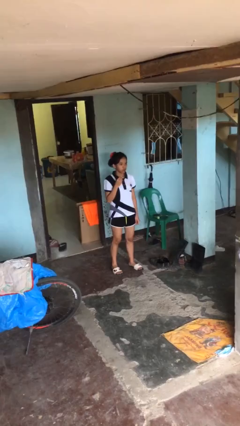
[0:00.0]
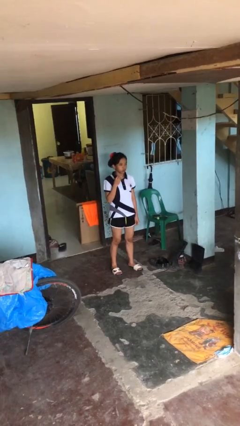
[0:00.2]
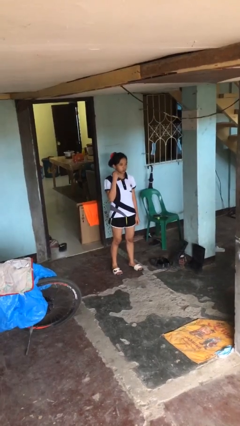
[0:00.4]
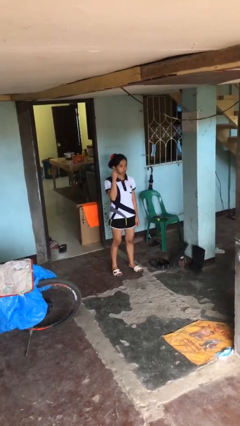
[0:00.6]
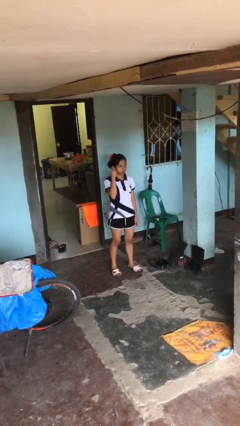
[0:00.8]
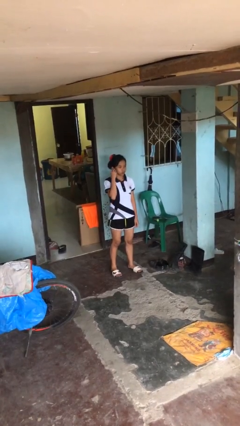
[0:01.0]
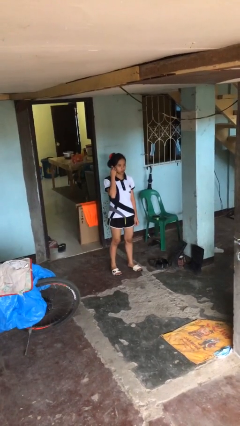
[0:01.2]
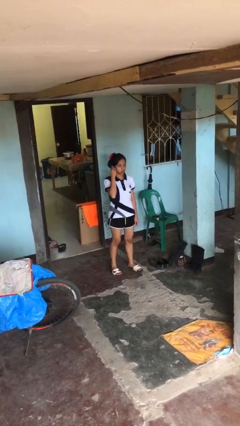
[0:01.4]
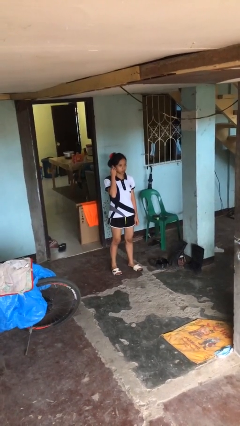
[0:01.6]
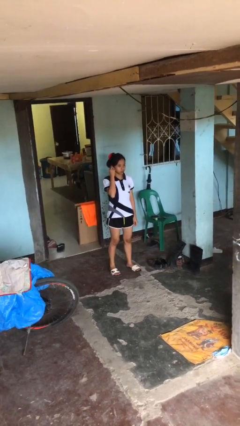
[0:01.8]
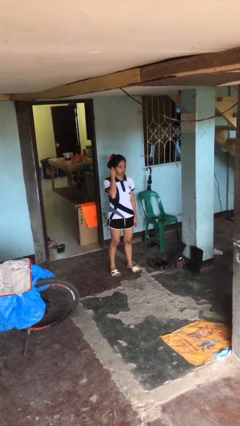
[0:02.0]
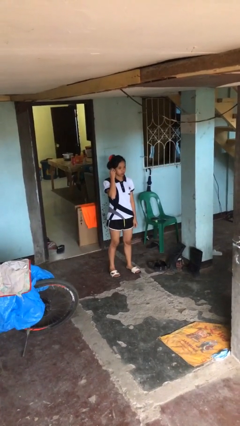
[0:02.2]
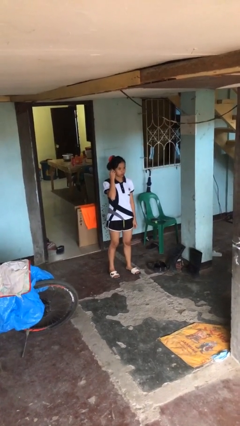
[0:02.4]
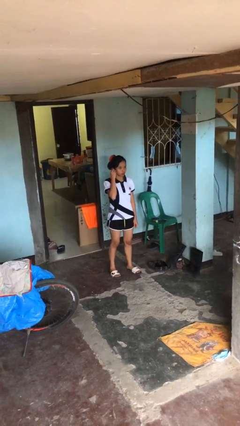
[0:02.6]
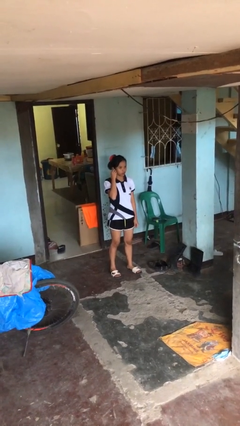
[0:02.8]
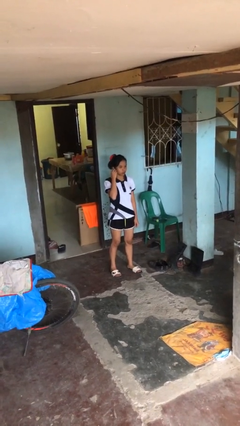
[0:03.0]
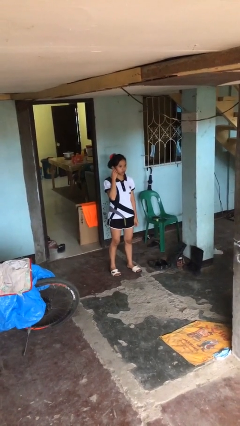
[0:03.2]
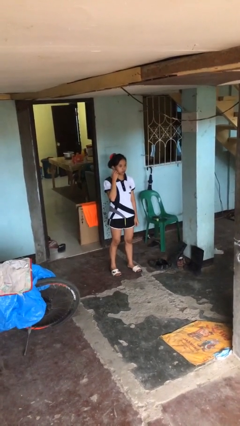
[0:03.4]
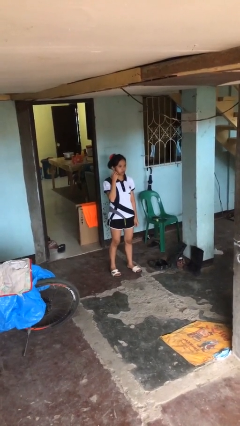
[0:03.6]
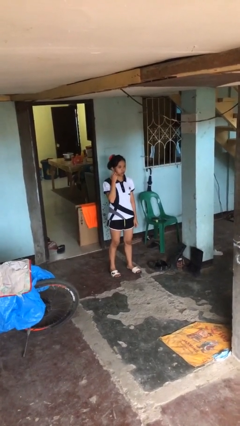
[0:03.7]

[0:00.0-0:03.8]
person puts on earrings

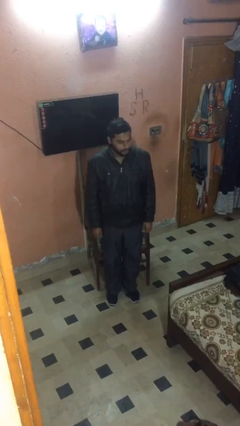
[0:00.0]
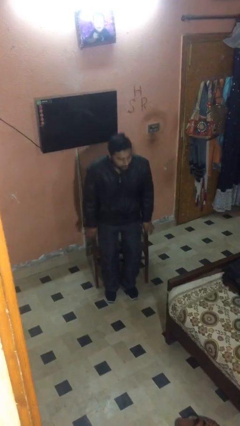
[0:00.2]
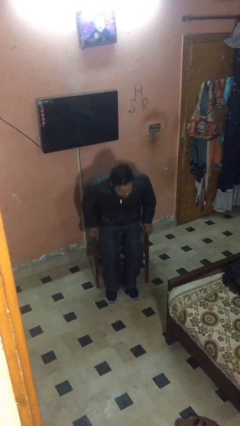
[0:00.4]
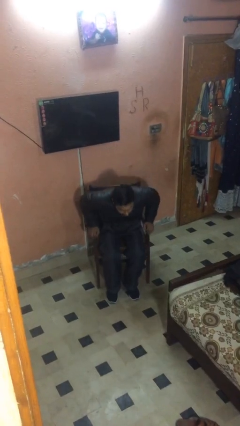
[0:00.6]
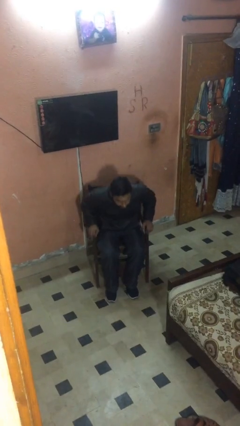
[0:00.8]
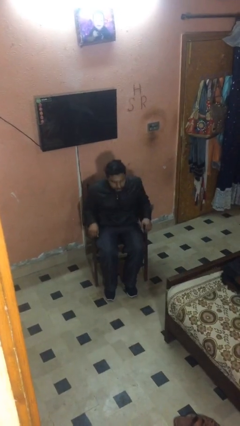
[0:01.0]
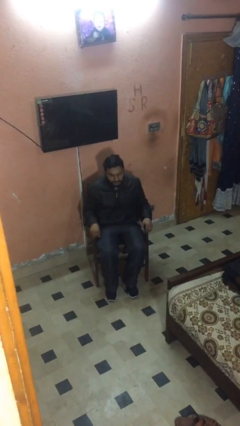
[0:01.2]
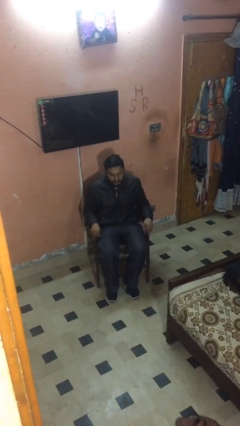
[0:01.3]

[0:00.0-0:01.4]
person sits down

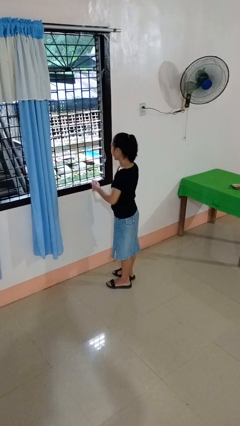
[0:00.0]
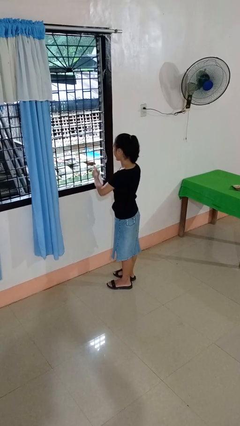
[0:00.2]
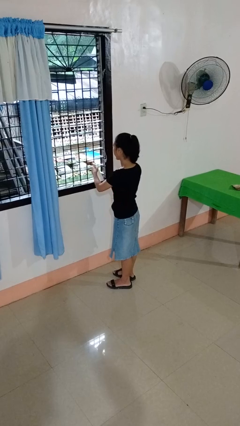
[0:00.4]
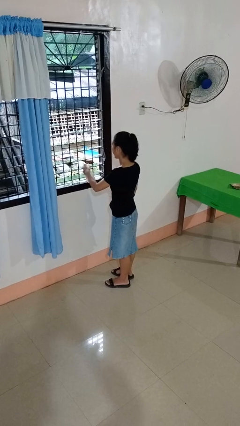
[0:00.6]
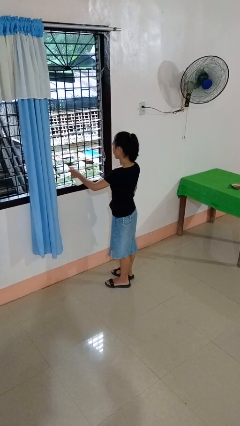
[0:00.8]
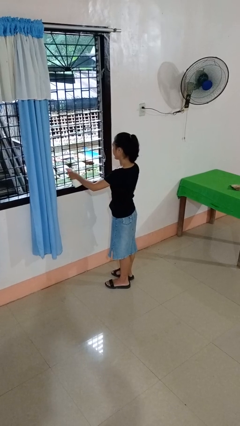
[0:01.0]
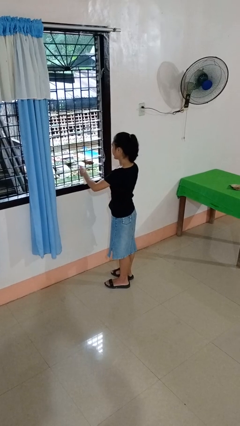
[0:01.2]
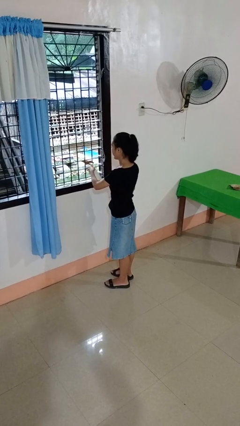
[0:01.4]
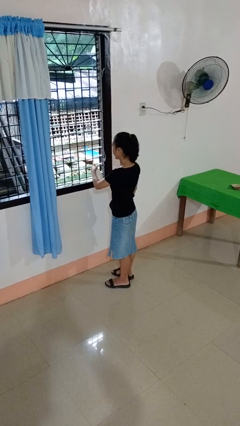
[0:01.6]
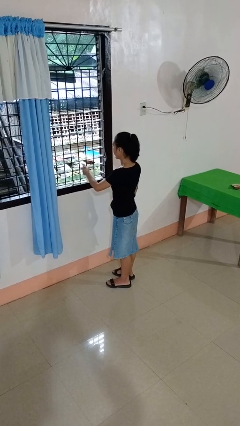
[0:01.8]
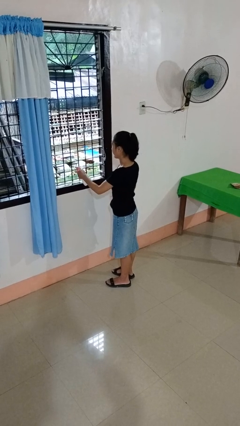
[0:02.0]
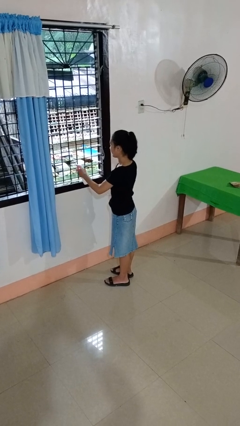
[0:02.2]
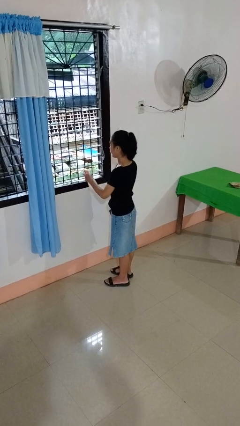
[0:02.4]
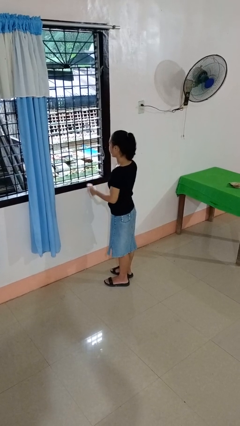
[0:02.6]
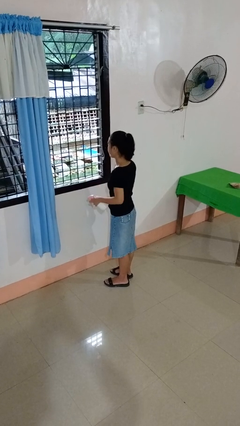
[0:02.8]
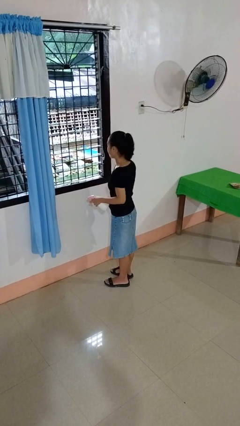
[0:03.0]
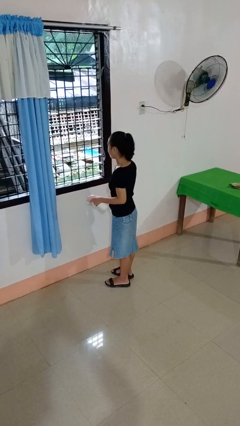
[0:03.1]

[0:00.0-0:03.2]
person sprays from bottle

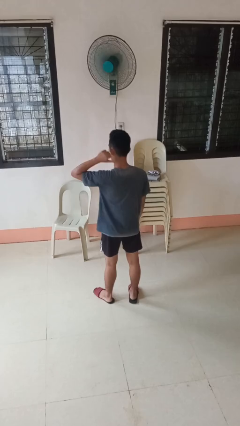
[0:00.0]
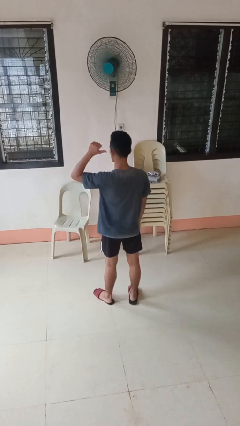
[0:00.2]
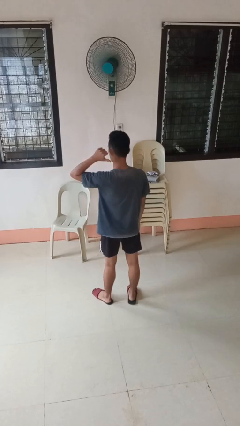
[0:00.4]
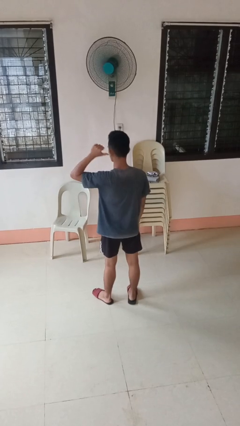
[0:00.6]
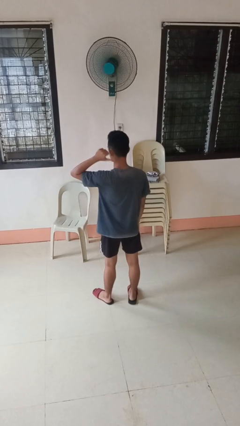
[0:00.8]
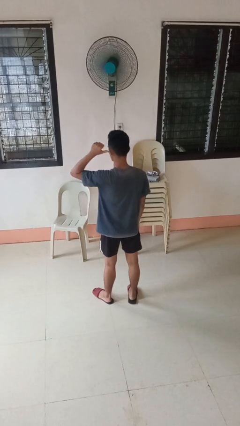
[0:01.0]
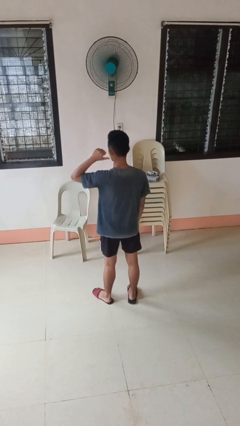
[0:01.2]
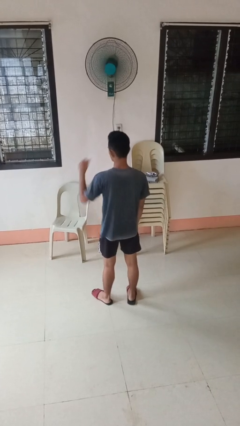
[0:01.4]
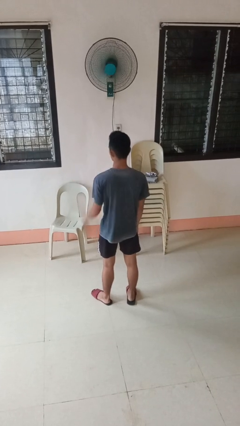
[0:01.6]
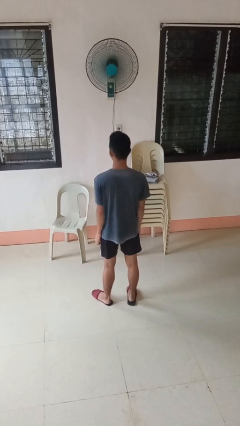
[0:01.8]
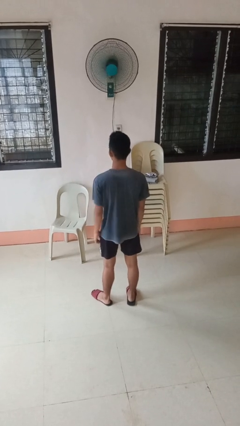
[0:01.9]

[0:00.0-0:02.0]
person gestures behind me

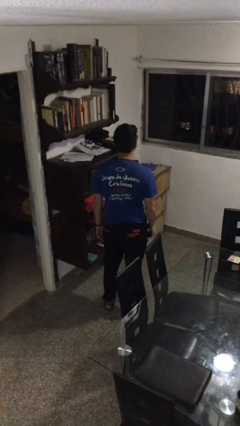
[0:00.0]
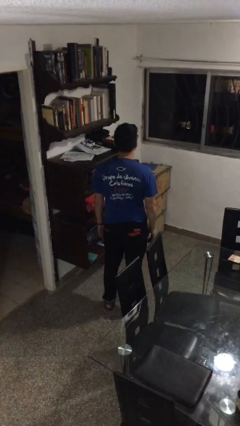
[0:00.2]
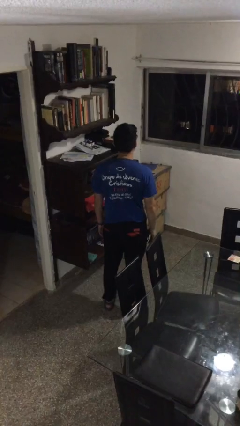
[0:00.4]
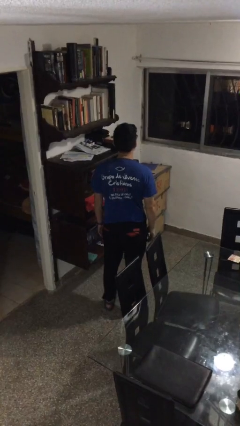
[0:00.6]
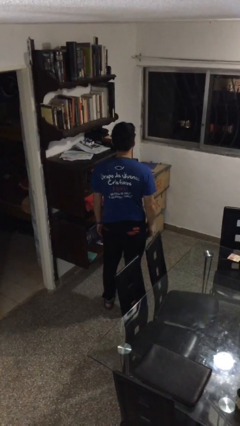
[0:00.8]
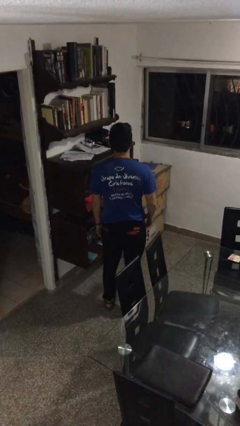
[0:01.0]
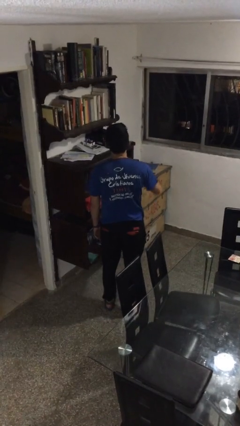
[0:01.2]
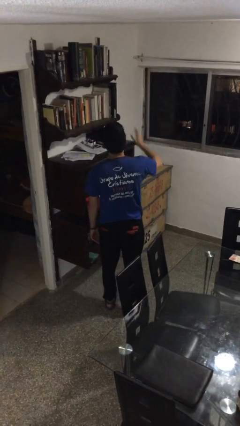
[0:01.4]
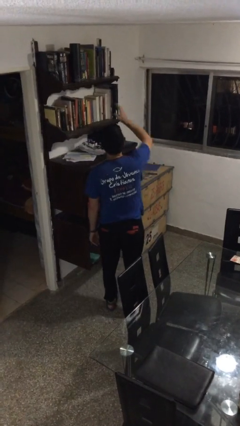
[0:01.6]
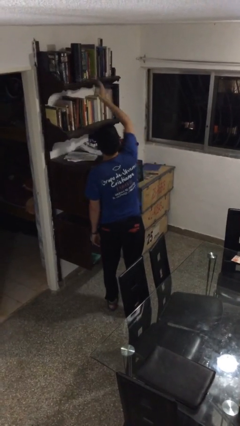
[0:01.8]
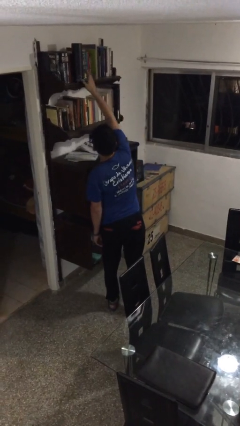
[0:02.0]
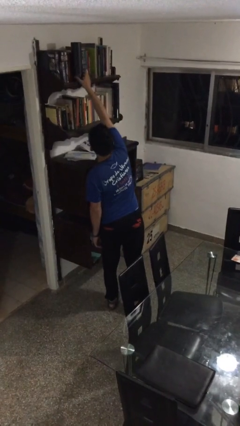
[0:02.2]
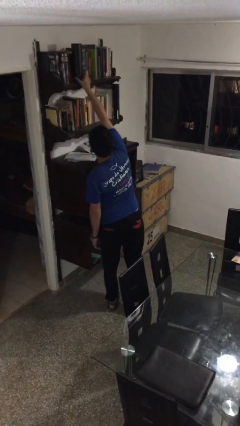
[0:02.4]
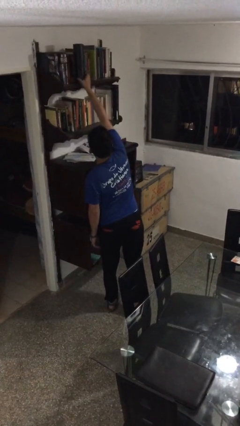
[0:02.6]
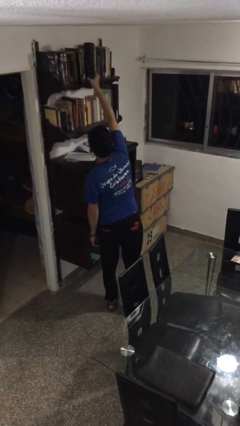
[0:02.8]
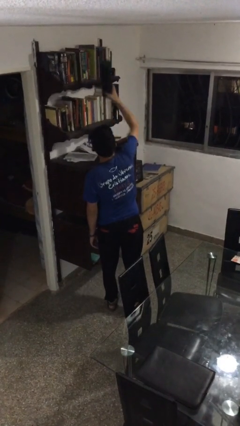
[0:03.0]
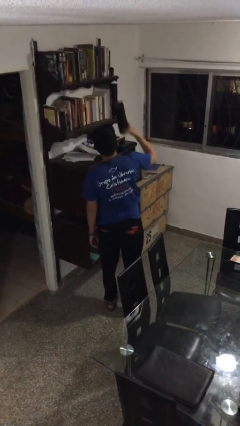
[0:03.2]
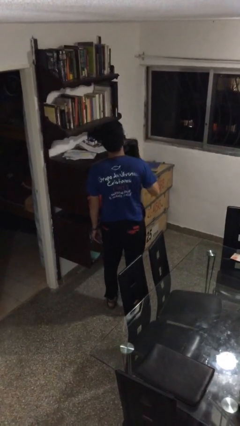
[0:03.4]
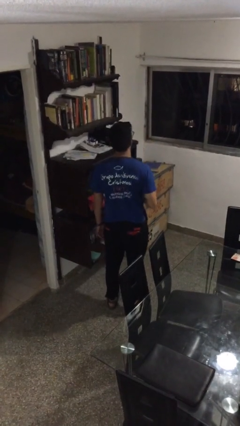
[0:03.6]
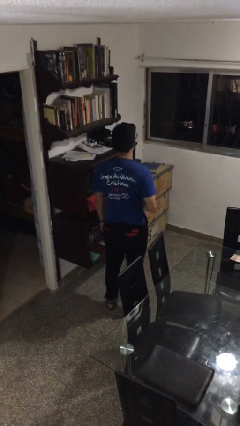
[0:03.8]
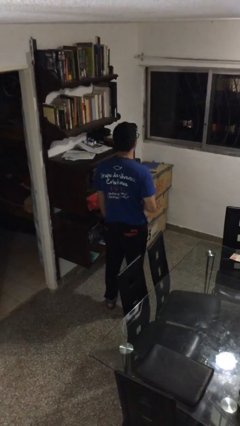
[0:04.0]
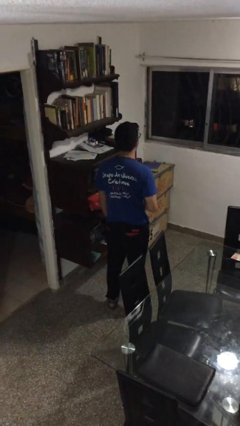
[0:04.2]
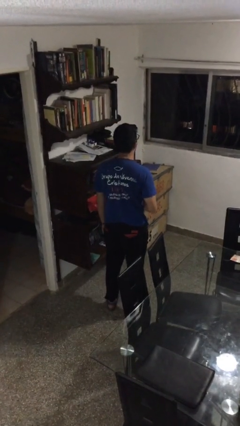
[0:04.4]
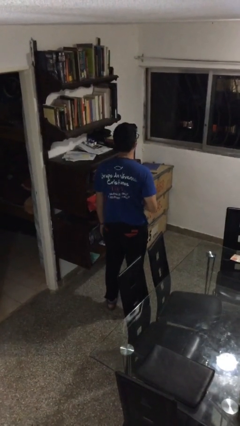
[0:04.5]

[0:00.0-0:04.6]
person picks up object from shelf

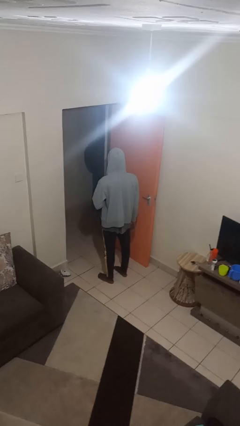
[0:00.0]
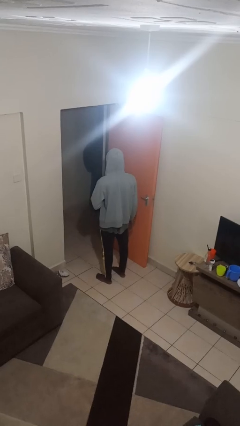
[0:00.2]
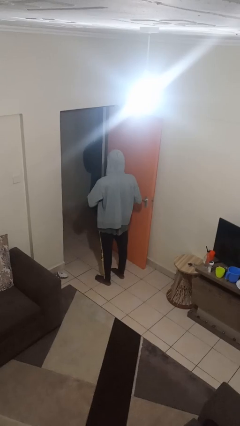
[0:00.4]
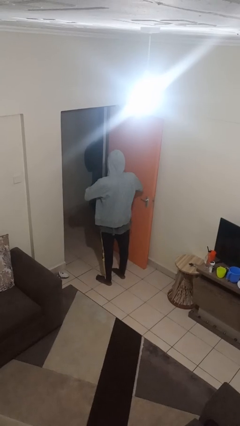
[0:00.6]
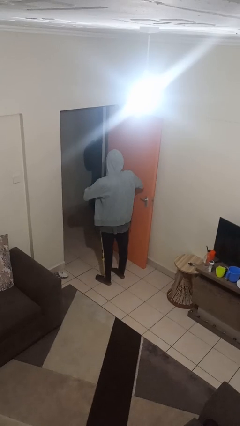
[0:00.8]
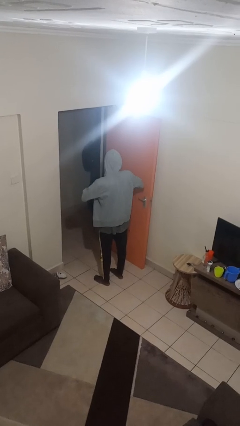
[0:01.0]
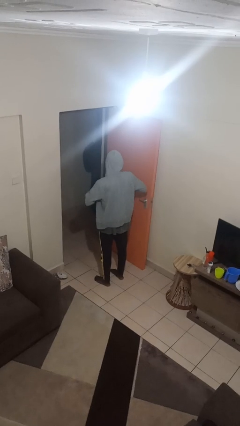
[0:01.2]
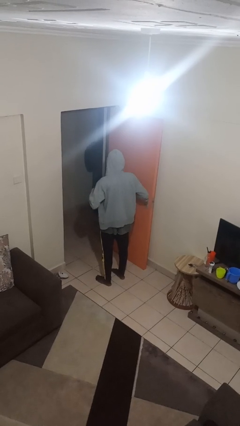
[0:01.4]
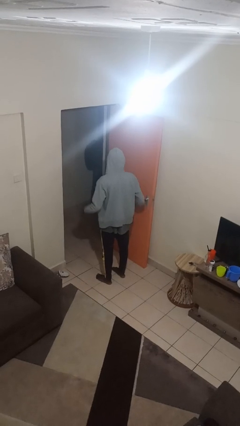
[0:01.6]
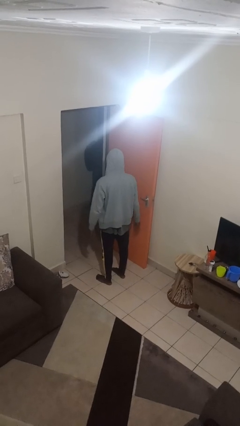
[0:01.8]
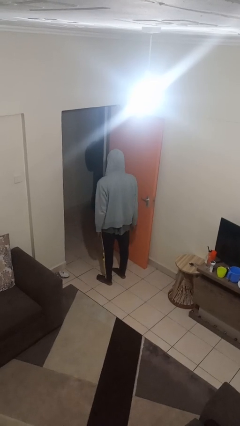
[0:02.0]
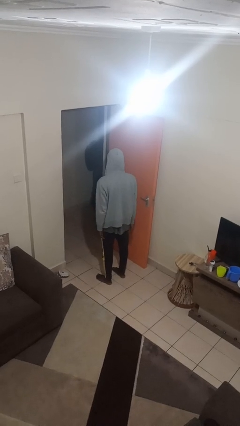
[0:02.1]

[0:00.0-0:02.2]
person takes off ring

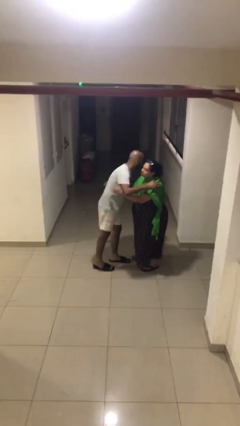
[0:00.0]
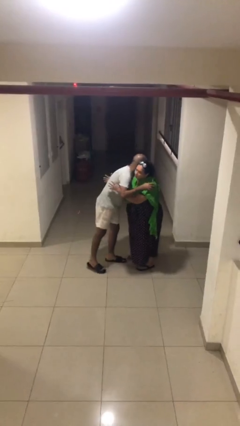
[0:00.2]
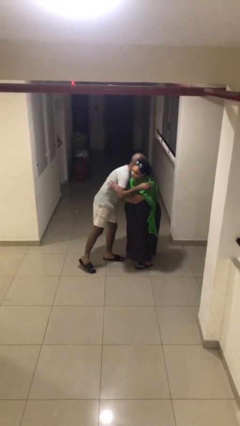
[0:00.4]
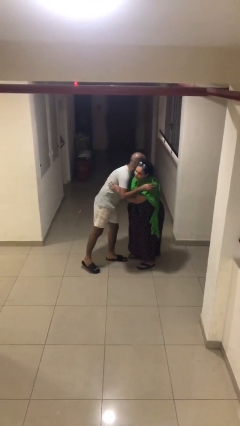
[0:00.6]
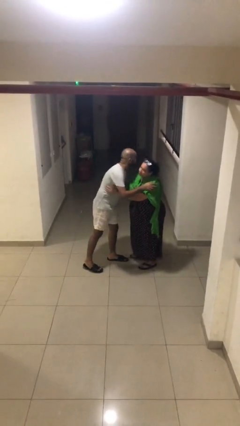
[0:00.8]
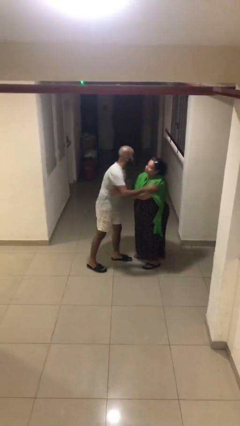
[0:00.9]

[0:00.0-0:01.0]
person embraces person
